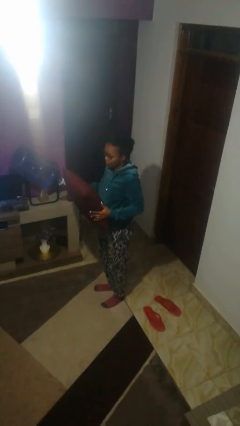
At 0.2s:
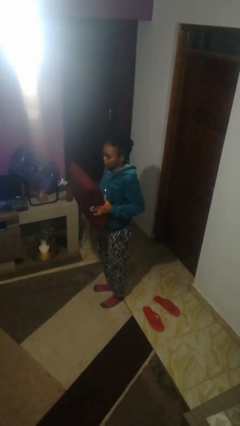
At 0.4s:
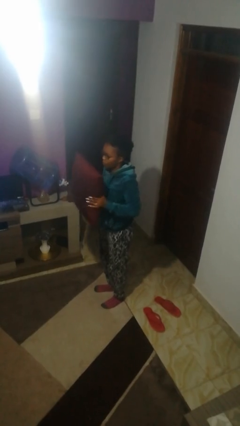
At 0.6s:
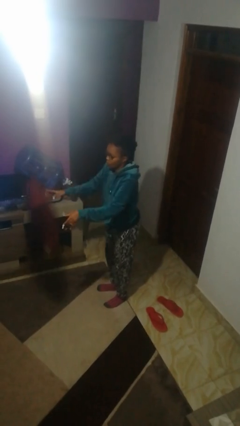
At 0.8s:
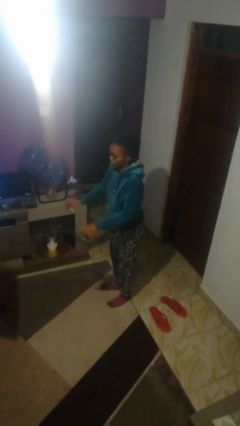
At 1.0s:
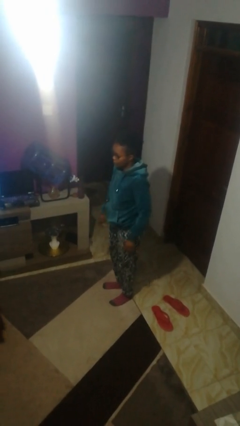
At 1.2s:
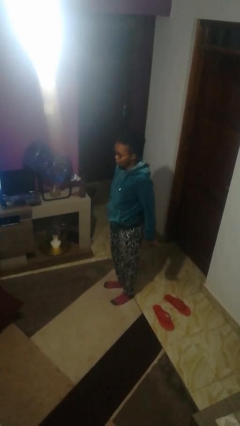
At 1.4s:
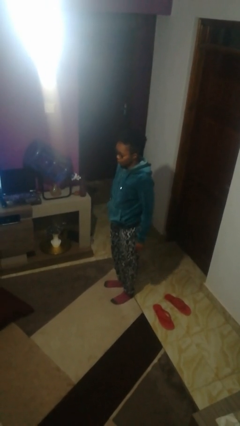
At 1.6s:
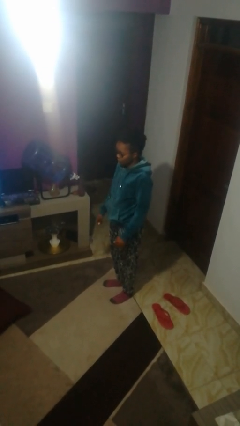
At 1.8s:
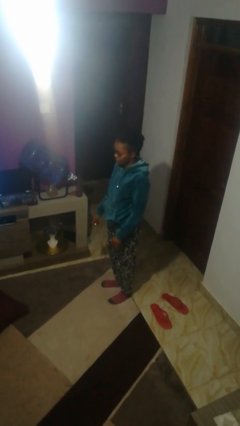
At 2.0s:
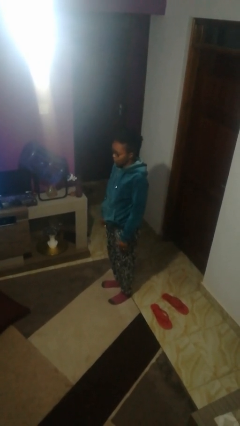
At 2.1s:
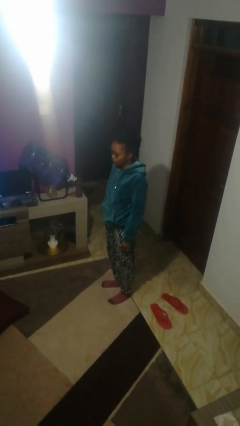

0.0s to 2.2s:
person throws object to ground

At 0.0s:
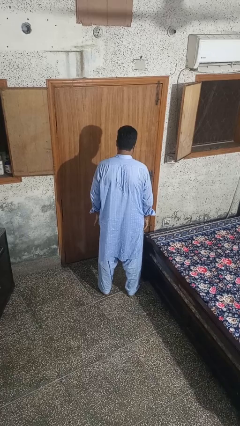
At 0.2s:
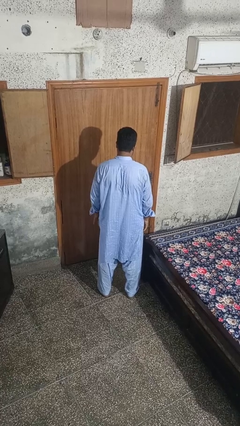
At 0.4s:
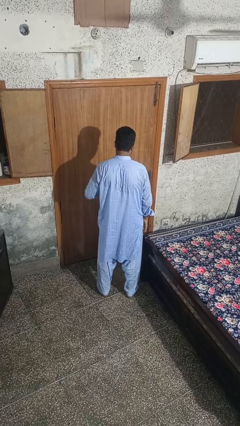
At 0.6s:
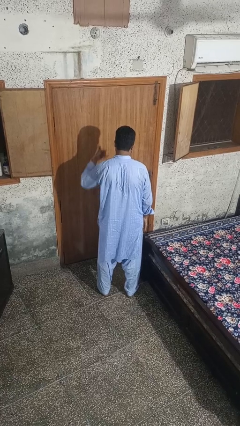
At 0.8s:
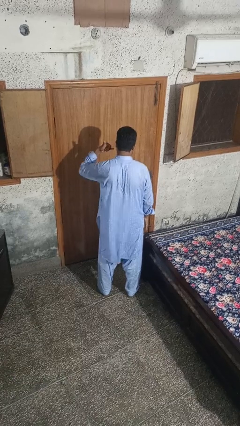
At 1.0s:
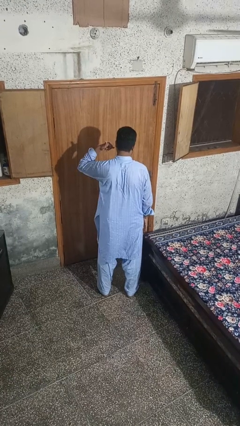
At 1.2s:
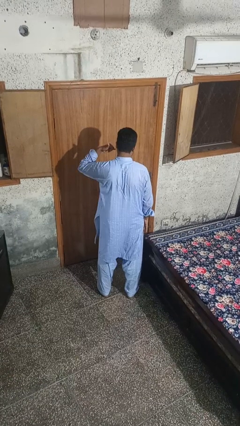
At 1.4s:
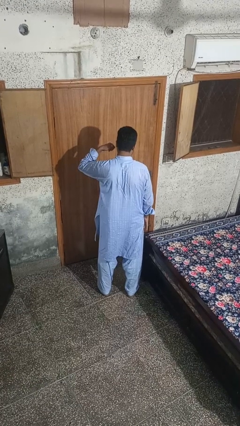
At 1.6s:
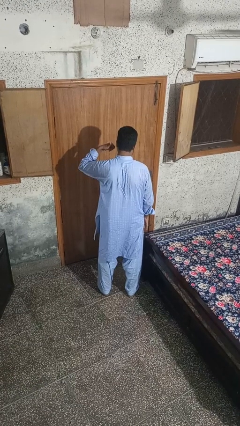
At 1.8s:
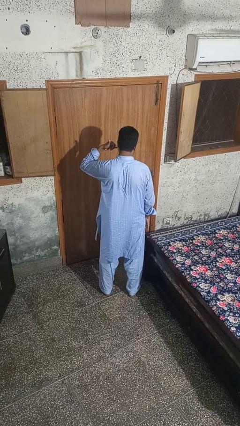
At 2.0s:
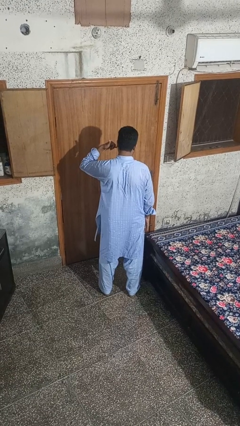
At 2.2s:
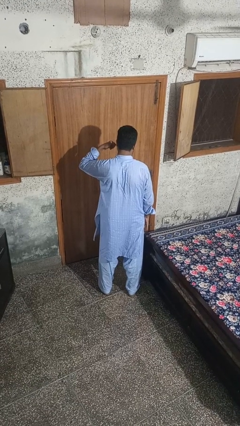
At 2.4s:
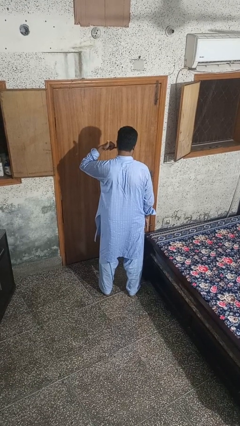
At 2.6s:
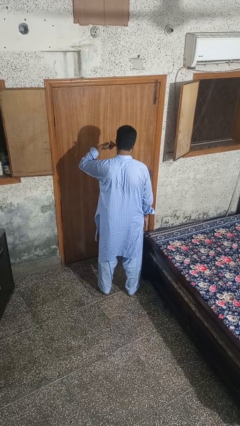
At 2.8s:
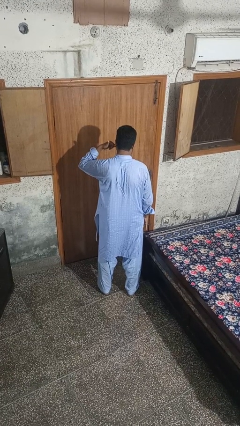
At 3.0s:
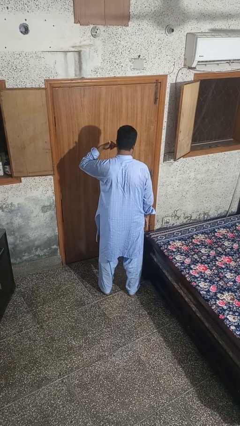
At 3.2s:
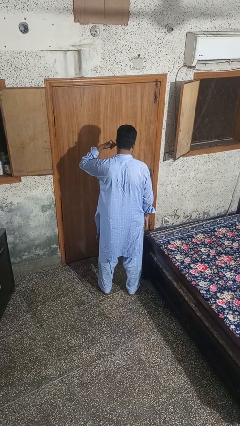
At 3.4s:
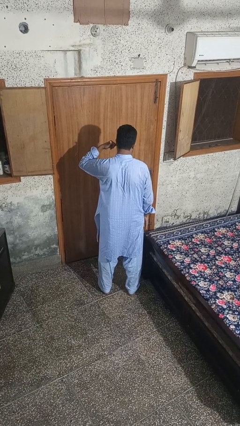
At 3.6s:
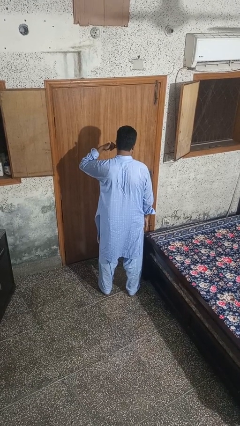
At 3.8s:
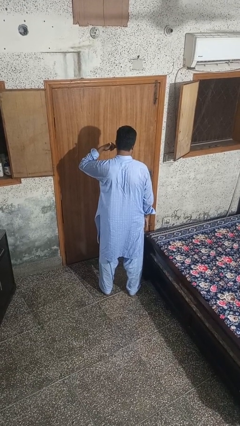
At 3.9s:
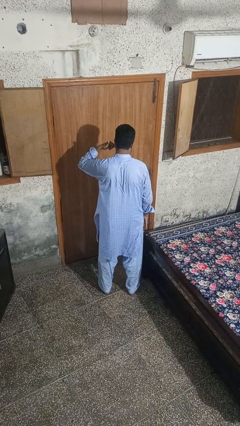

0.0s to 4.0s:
person gestures call me

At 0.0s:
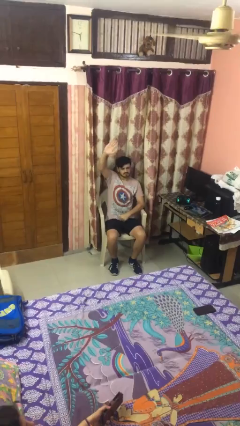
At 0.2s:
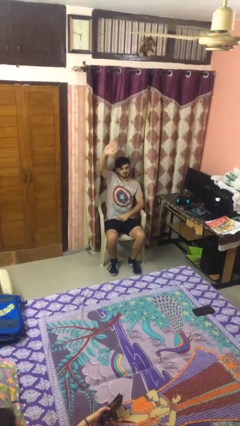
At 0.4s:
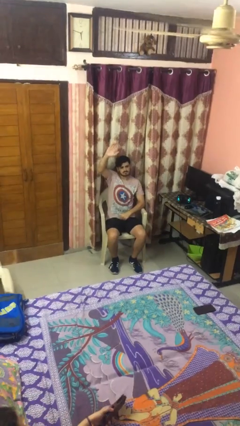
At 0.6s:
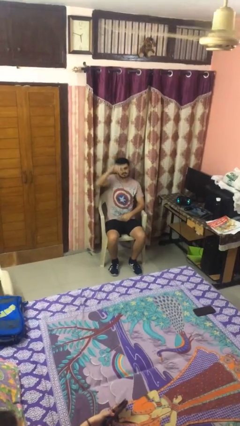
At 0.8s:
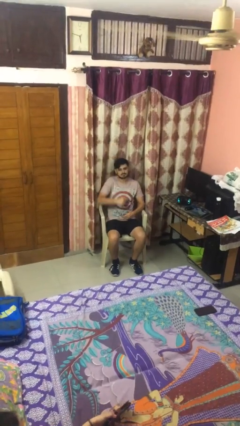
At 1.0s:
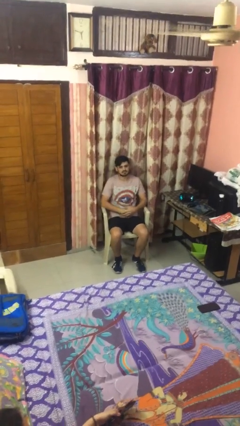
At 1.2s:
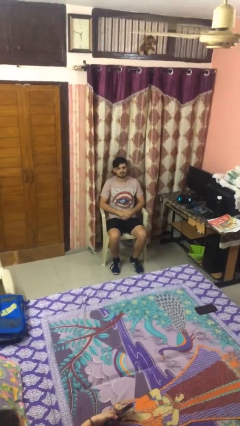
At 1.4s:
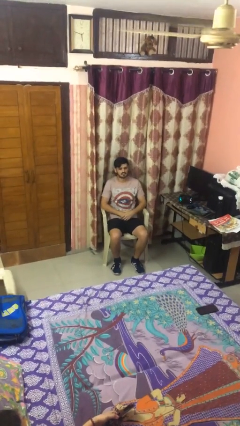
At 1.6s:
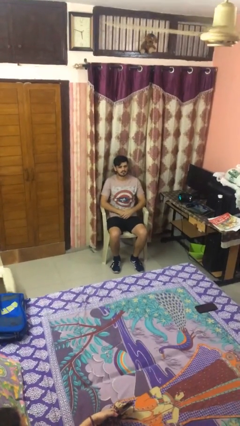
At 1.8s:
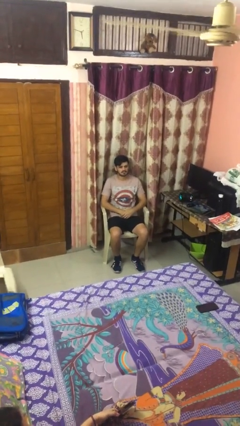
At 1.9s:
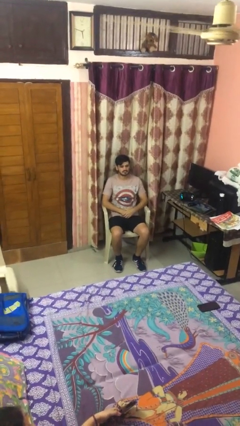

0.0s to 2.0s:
person gestures lower hand

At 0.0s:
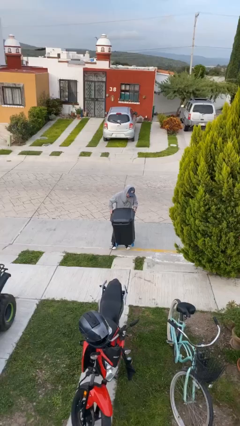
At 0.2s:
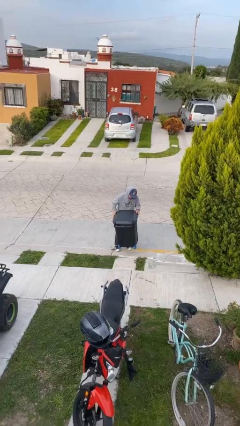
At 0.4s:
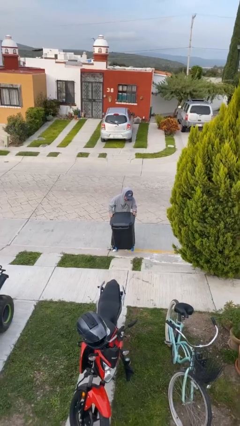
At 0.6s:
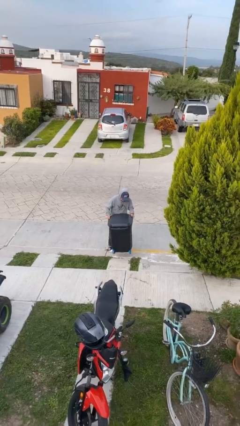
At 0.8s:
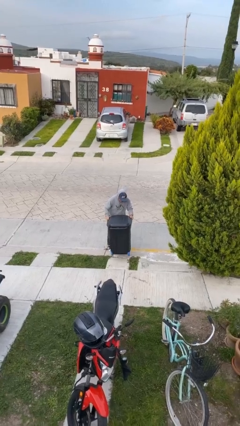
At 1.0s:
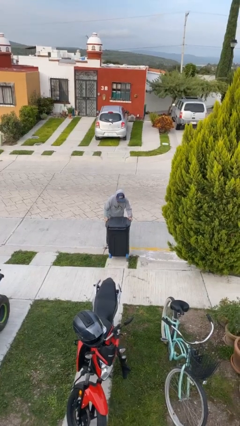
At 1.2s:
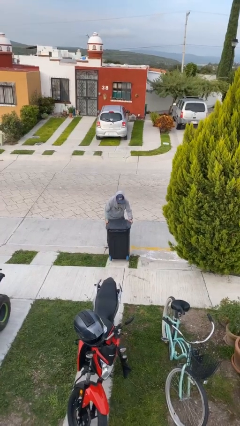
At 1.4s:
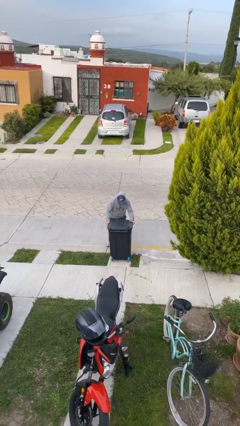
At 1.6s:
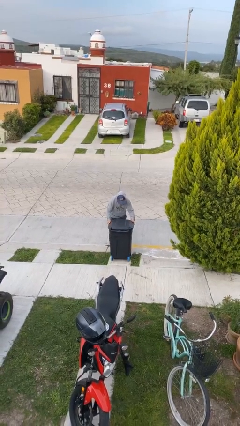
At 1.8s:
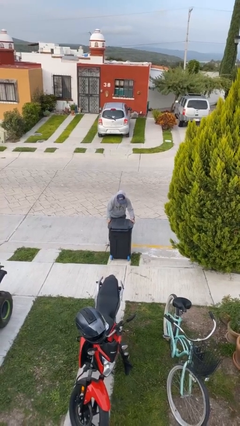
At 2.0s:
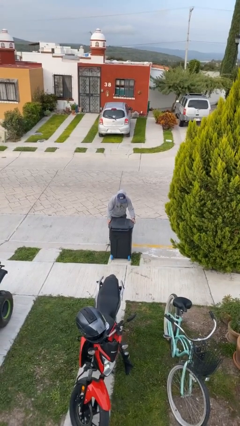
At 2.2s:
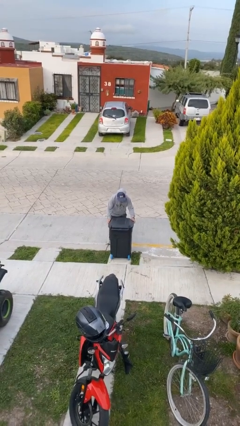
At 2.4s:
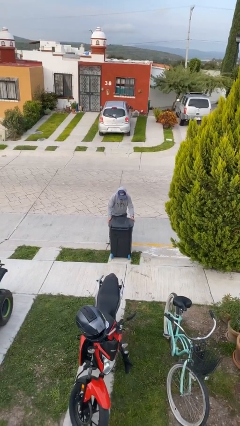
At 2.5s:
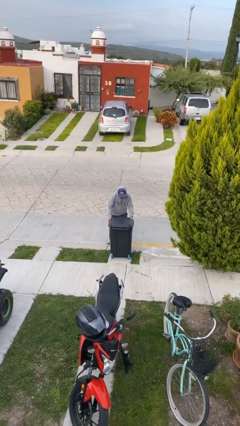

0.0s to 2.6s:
person puts down object on floor

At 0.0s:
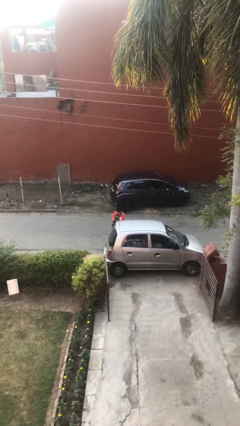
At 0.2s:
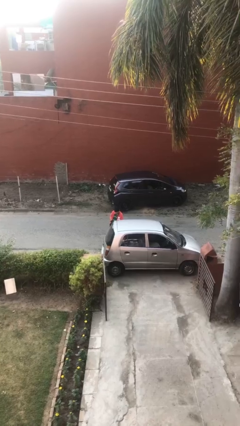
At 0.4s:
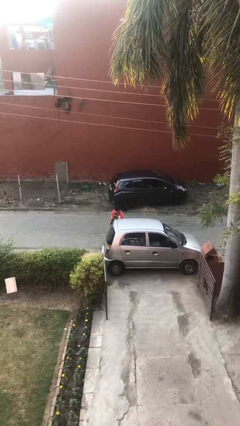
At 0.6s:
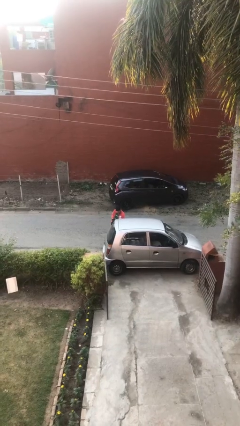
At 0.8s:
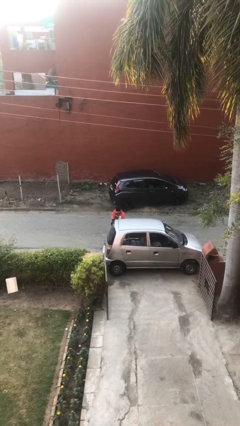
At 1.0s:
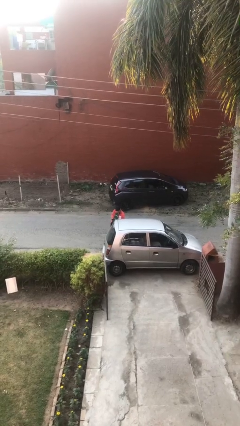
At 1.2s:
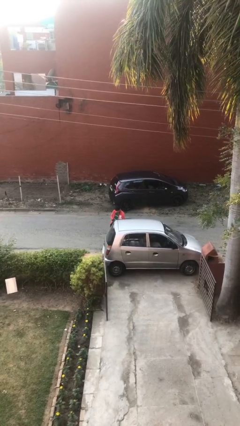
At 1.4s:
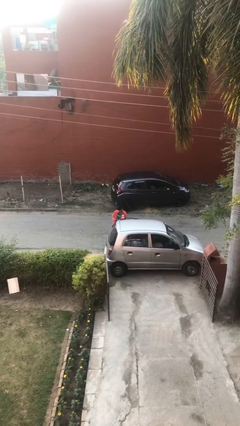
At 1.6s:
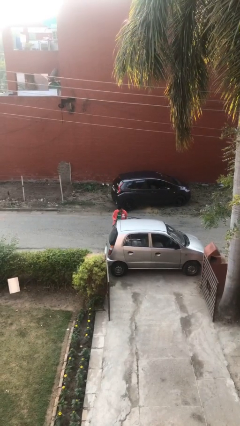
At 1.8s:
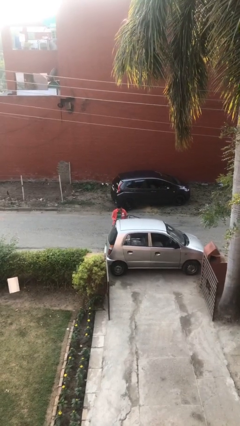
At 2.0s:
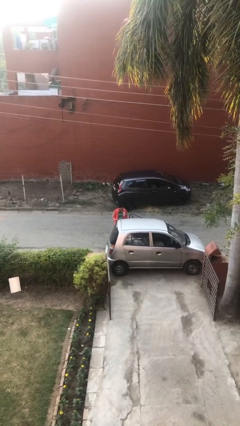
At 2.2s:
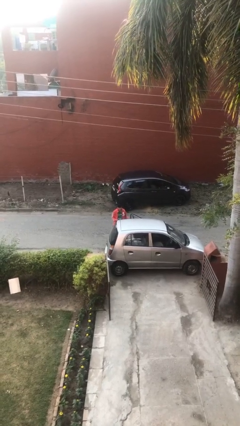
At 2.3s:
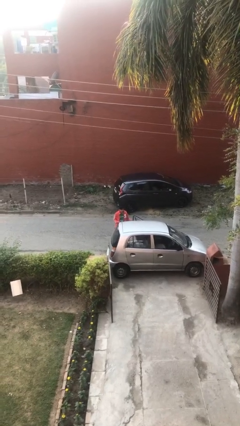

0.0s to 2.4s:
person opens car door

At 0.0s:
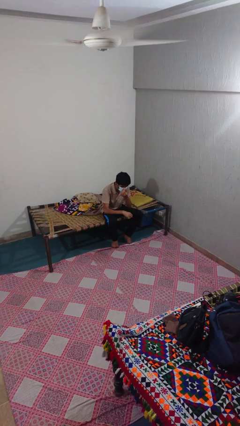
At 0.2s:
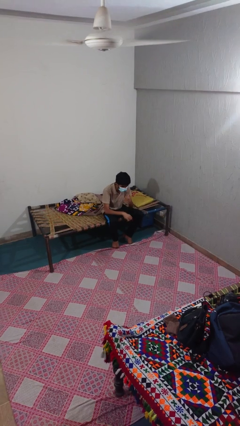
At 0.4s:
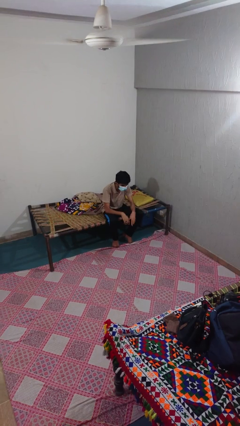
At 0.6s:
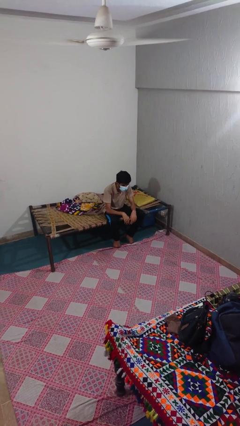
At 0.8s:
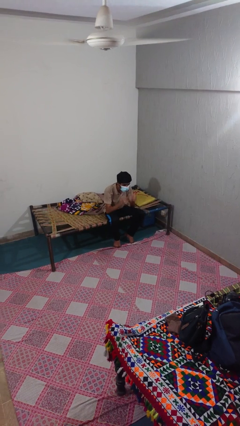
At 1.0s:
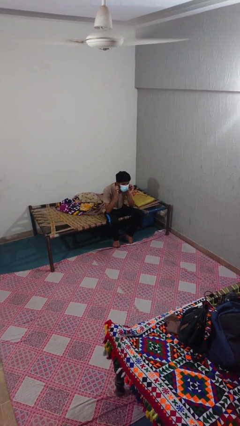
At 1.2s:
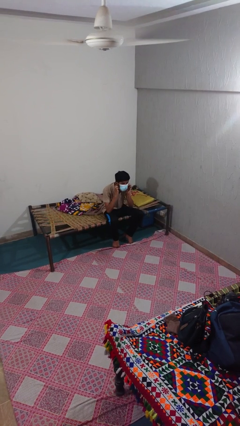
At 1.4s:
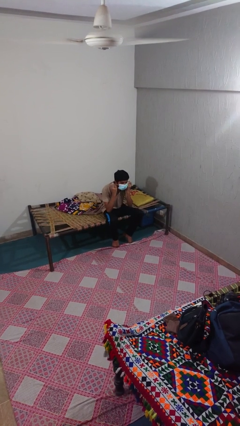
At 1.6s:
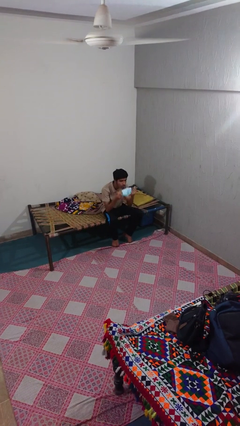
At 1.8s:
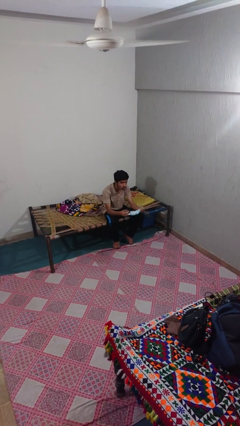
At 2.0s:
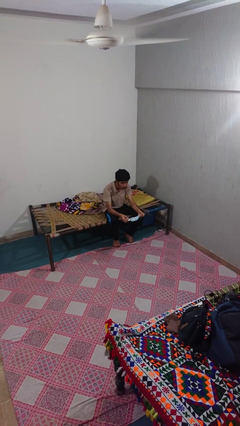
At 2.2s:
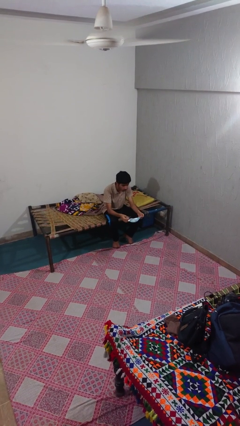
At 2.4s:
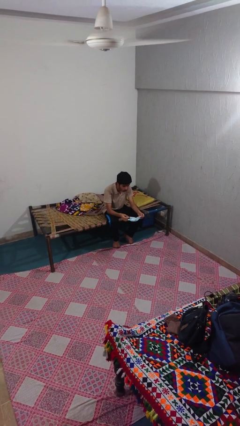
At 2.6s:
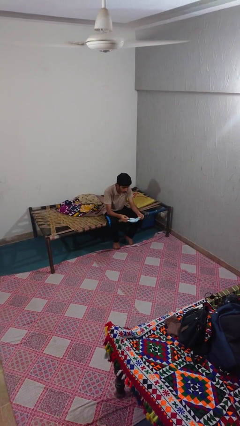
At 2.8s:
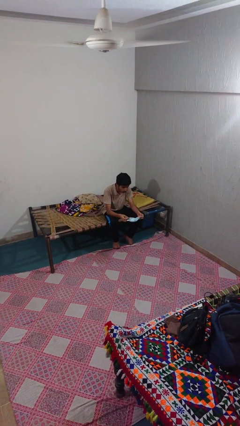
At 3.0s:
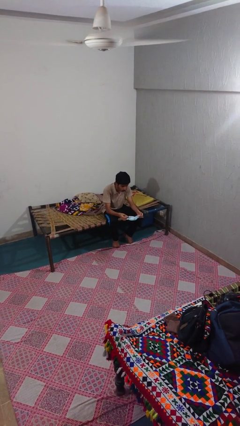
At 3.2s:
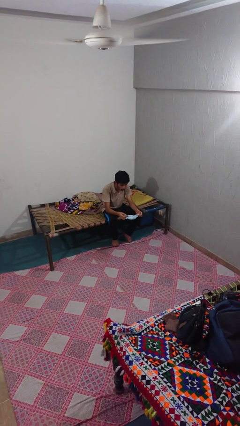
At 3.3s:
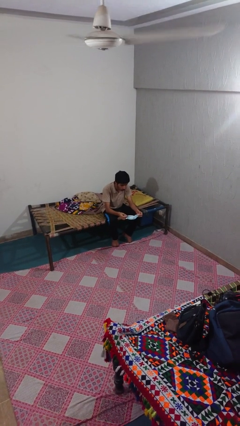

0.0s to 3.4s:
person takes off facemask

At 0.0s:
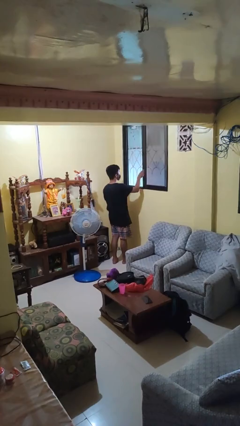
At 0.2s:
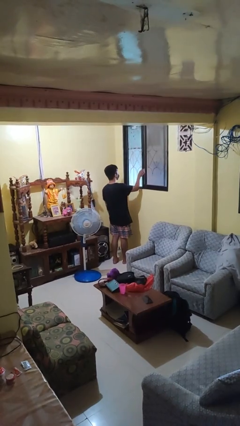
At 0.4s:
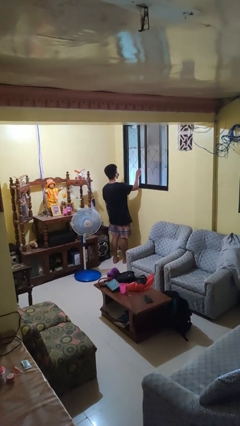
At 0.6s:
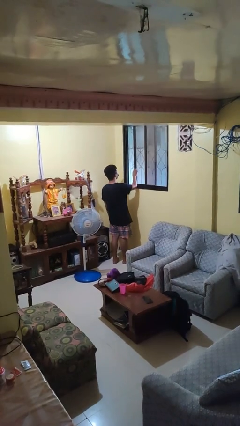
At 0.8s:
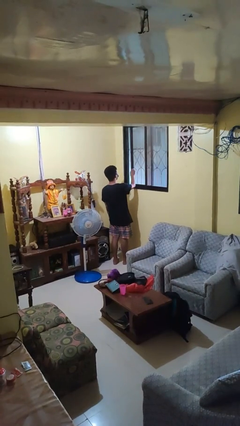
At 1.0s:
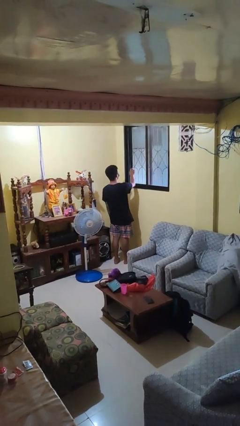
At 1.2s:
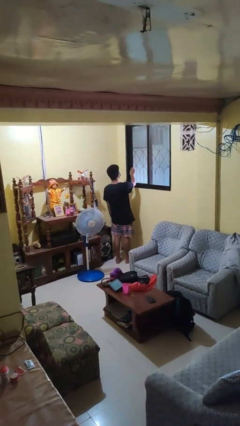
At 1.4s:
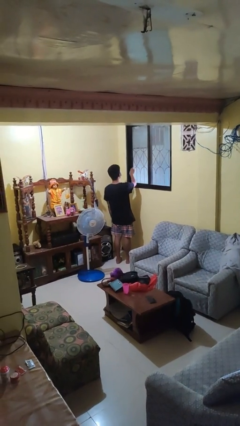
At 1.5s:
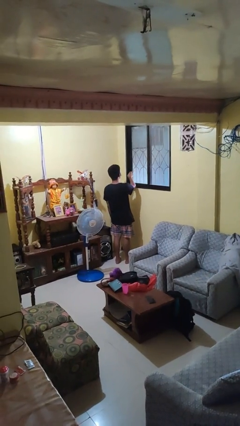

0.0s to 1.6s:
person closes home window
